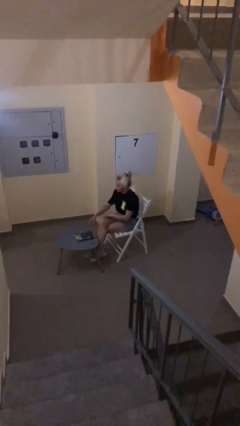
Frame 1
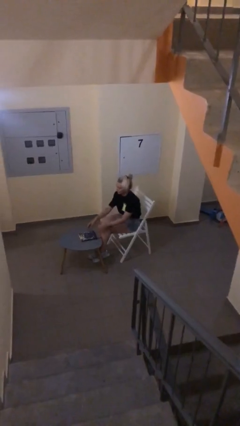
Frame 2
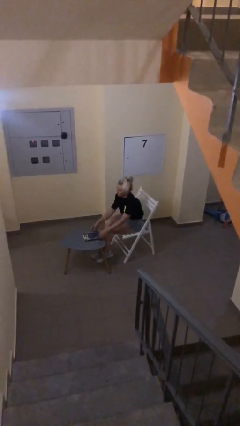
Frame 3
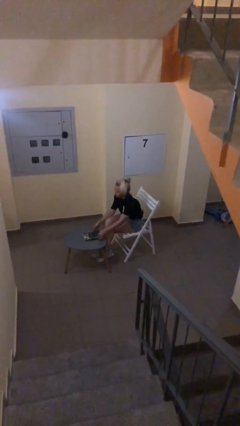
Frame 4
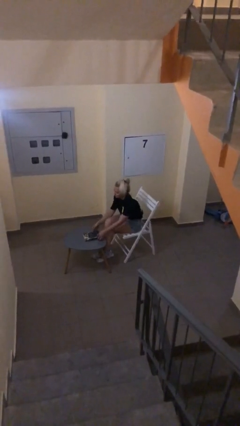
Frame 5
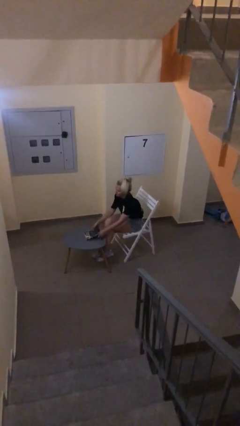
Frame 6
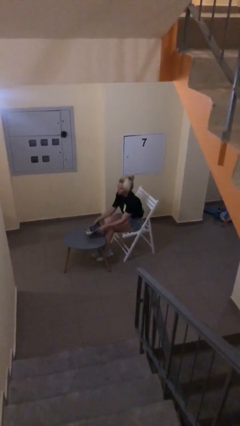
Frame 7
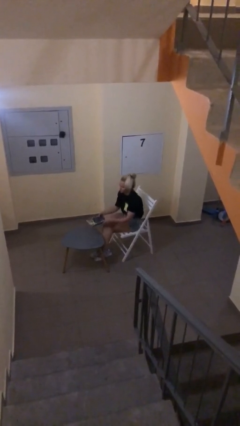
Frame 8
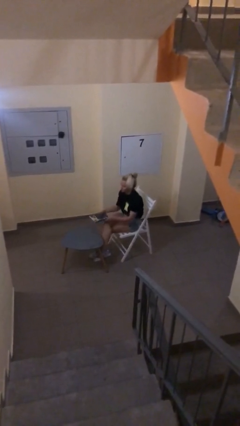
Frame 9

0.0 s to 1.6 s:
person picks up object from table

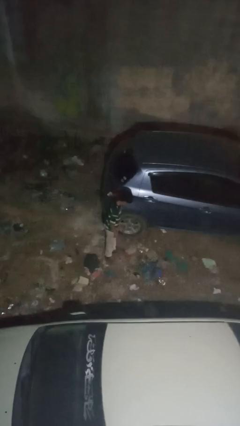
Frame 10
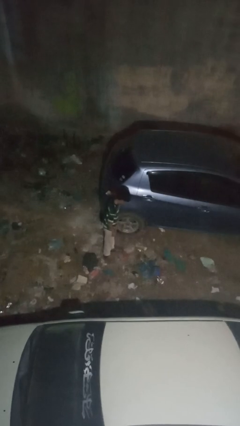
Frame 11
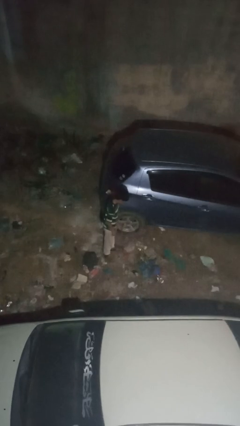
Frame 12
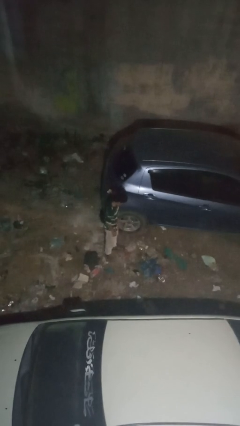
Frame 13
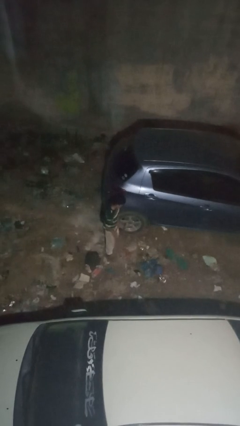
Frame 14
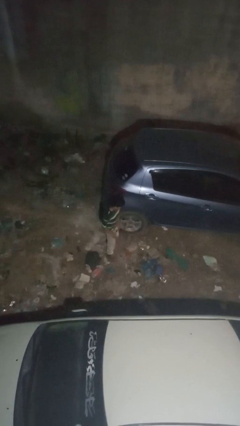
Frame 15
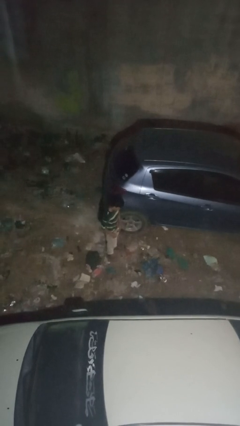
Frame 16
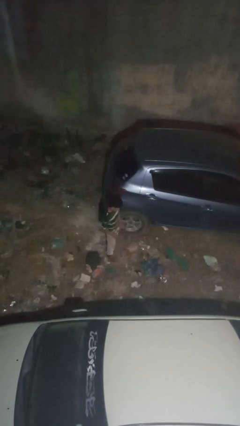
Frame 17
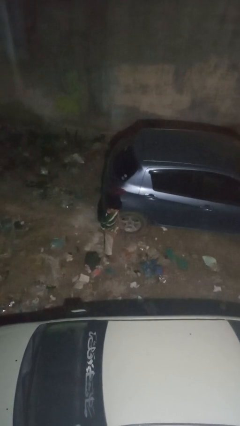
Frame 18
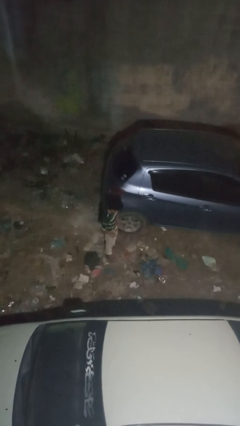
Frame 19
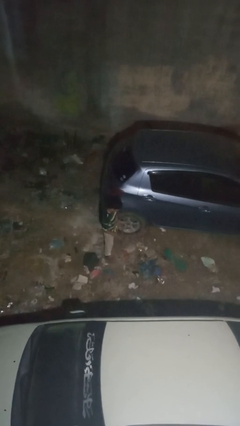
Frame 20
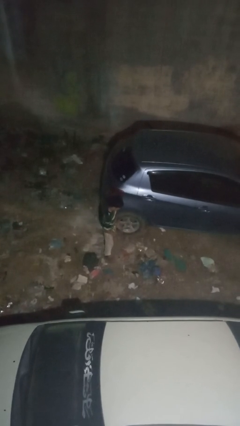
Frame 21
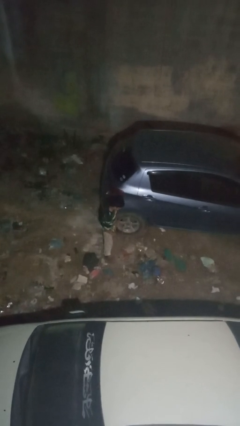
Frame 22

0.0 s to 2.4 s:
person kicks car tires

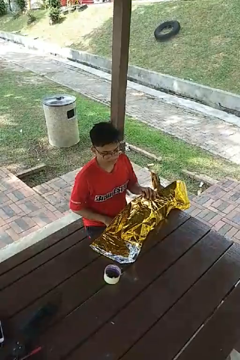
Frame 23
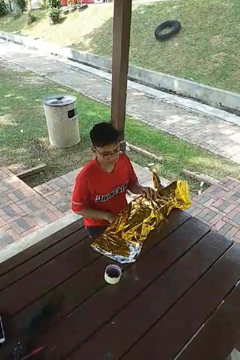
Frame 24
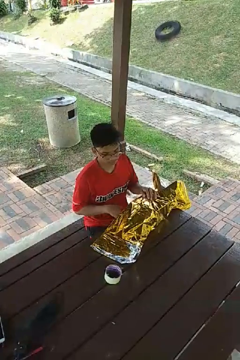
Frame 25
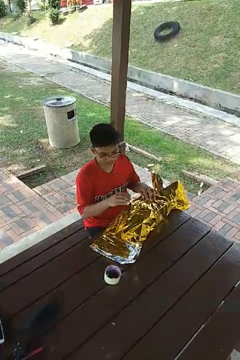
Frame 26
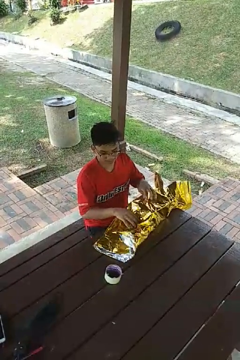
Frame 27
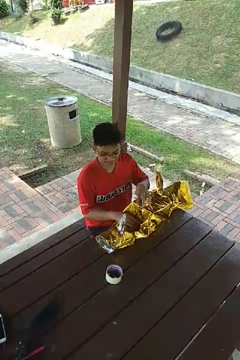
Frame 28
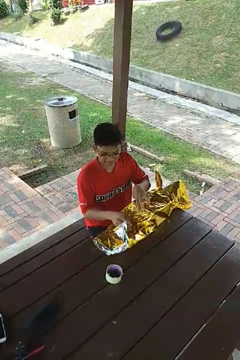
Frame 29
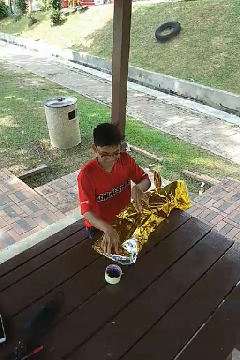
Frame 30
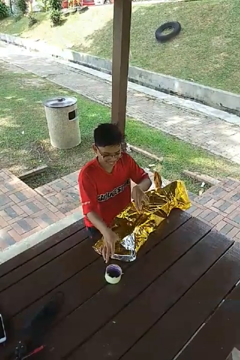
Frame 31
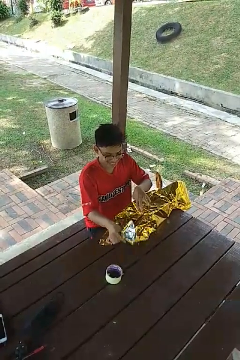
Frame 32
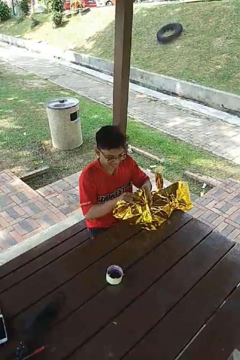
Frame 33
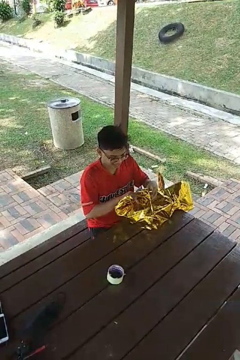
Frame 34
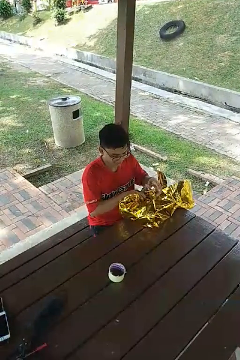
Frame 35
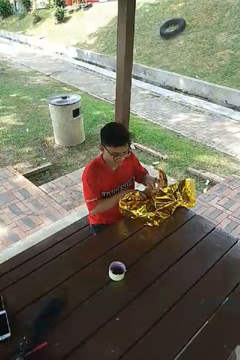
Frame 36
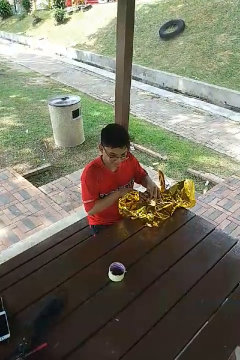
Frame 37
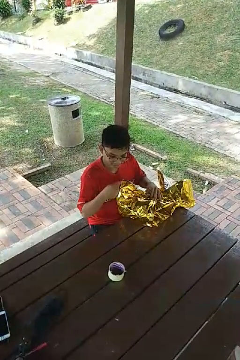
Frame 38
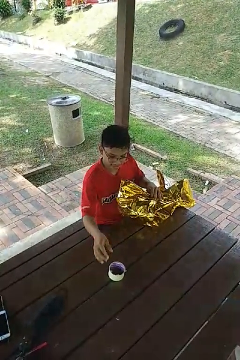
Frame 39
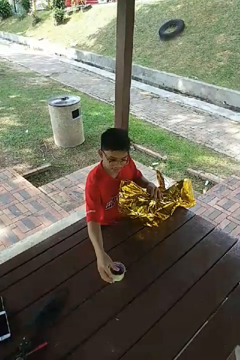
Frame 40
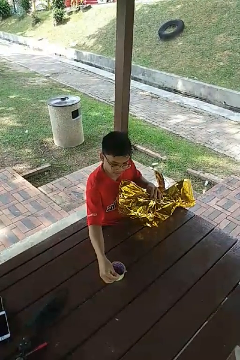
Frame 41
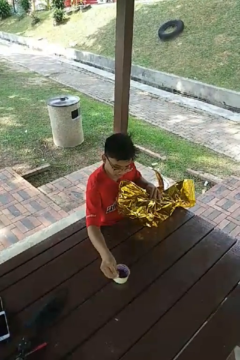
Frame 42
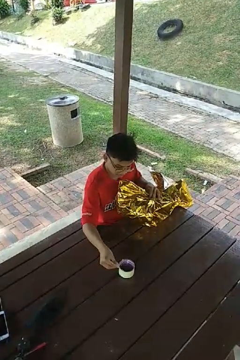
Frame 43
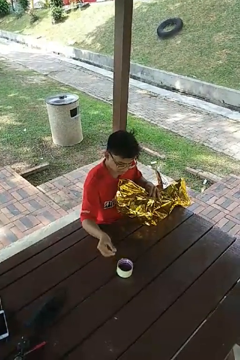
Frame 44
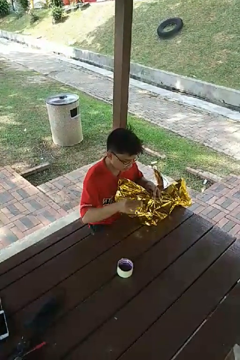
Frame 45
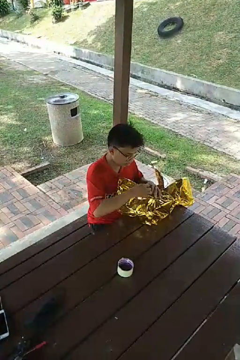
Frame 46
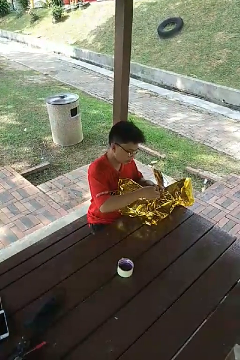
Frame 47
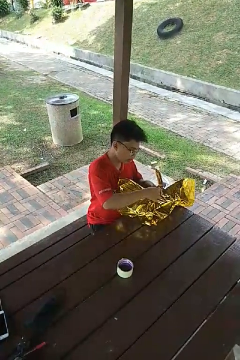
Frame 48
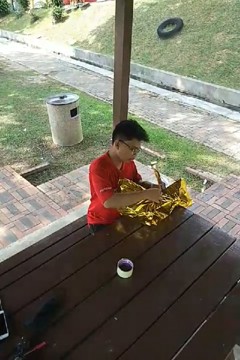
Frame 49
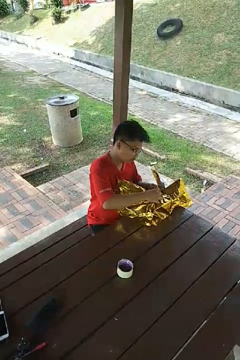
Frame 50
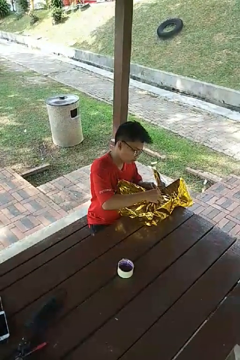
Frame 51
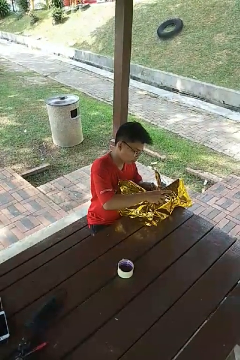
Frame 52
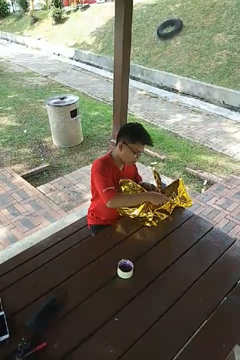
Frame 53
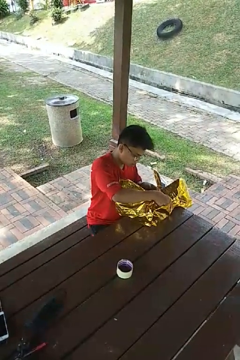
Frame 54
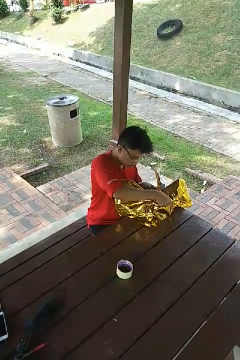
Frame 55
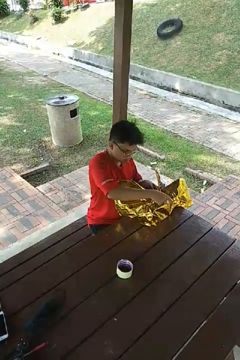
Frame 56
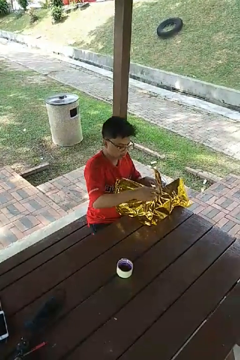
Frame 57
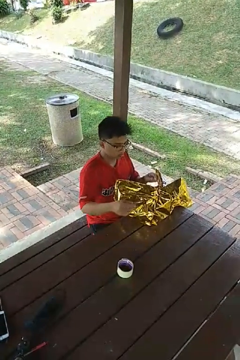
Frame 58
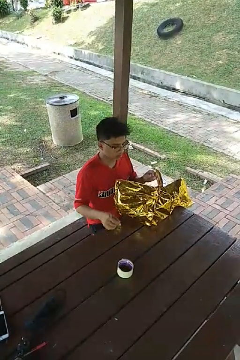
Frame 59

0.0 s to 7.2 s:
person wraps box

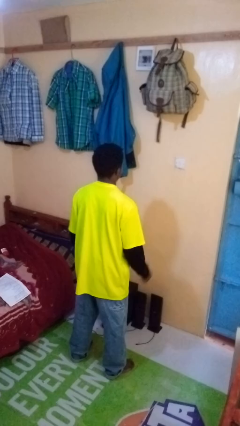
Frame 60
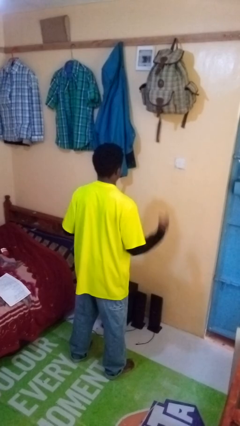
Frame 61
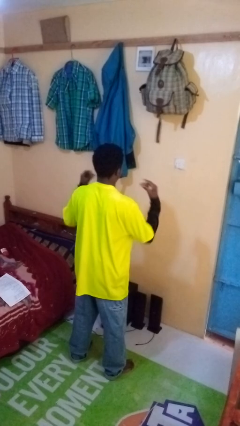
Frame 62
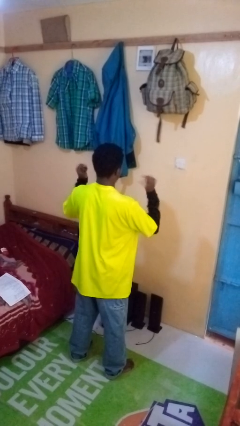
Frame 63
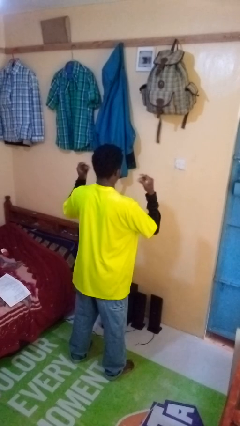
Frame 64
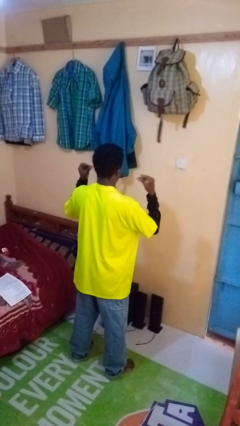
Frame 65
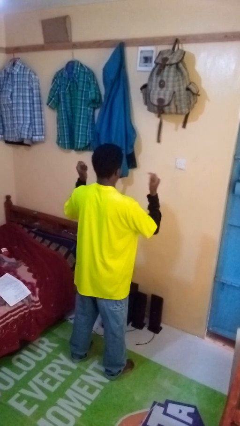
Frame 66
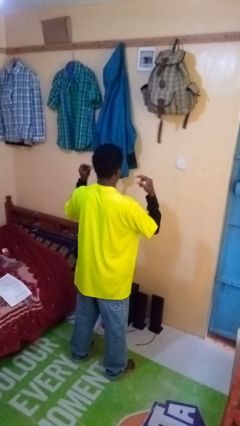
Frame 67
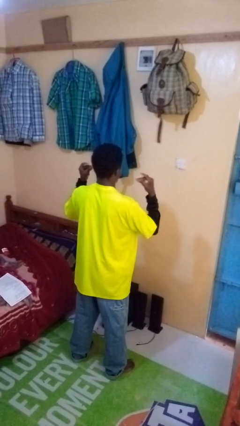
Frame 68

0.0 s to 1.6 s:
person snaps fingers

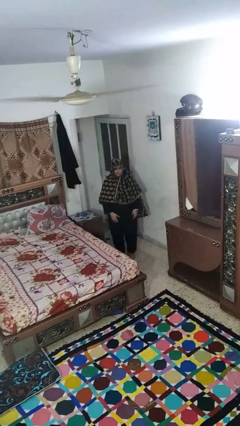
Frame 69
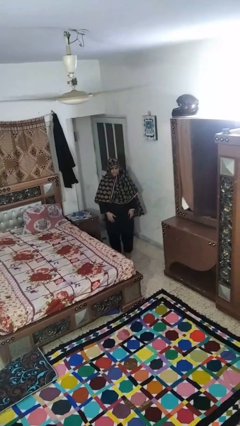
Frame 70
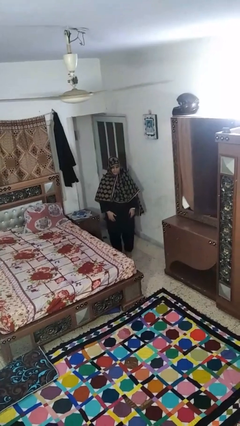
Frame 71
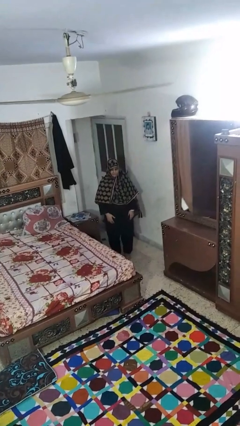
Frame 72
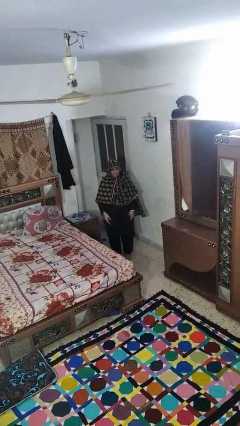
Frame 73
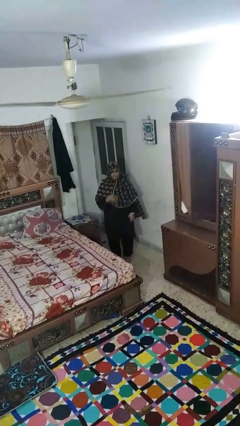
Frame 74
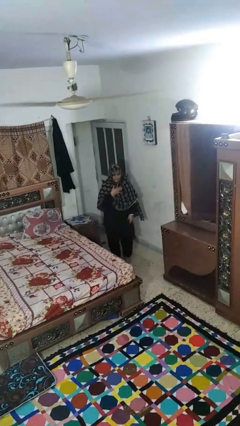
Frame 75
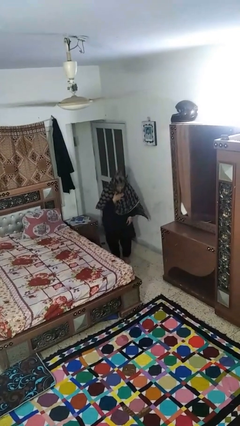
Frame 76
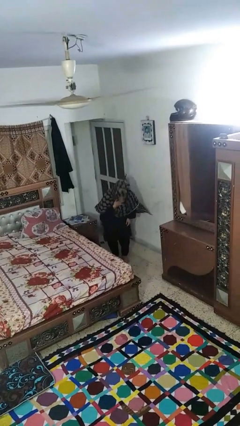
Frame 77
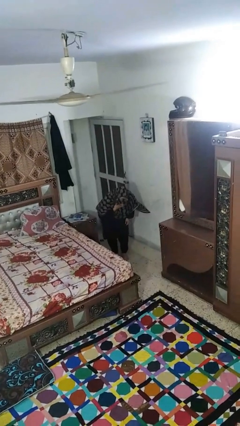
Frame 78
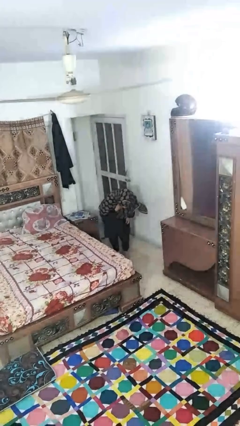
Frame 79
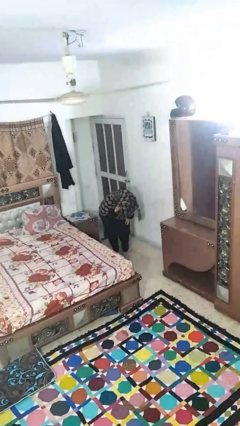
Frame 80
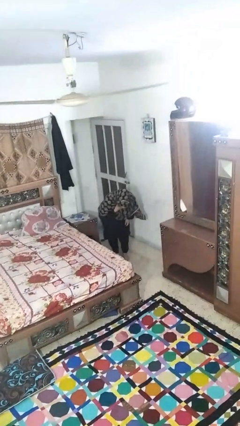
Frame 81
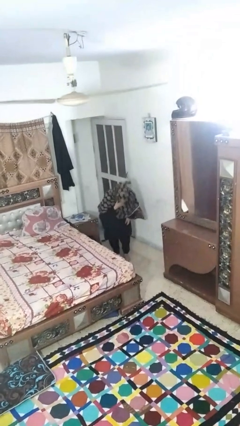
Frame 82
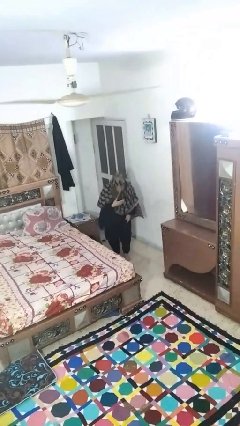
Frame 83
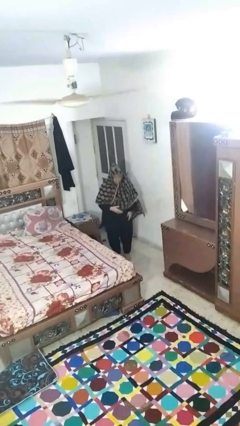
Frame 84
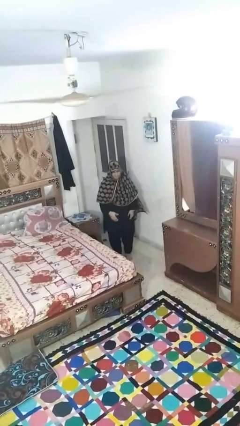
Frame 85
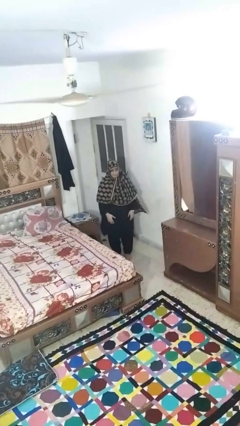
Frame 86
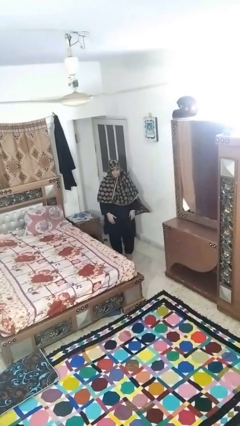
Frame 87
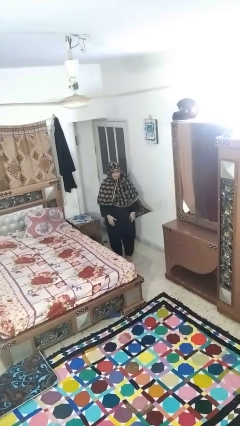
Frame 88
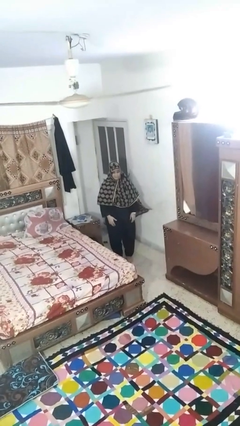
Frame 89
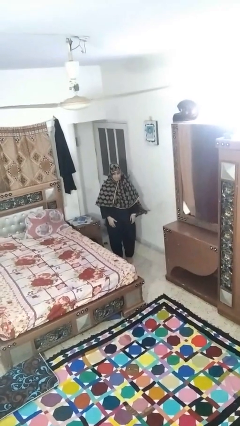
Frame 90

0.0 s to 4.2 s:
person bows

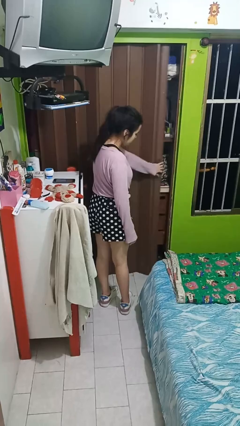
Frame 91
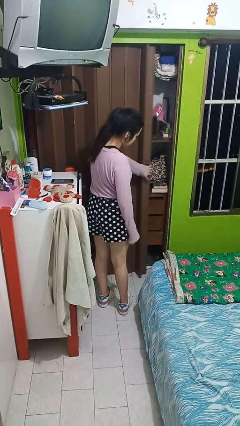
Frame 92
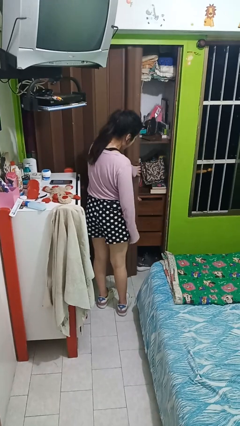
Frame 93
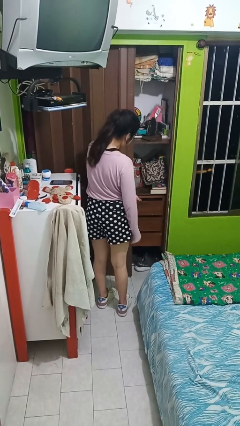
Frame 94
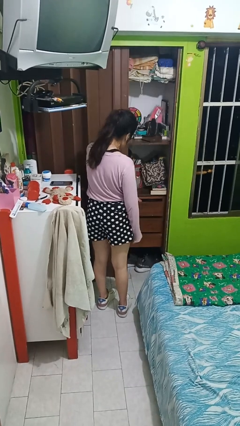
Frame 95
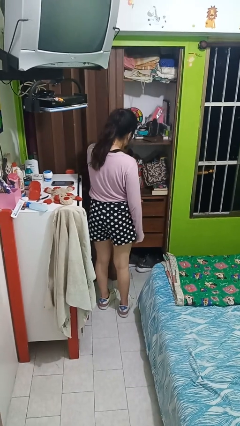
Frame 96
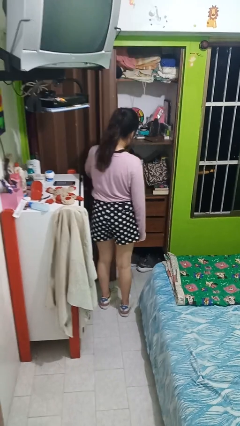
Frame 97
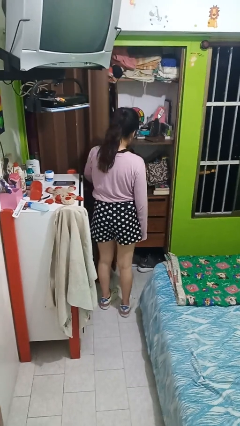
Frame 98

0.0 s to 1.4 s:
person opens sliding door
